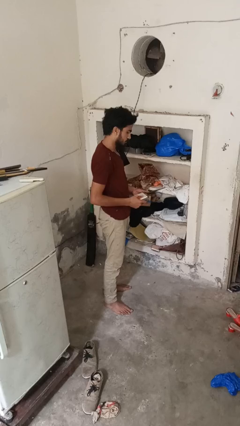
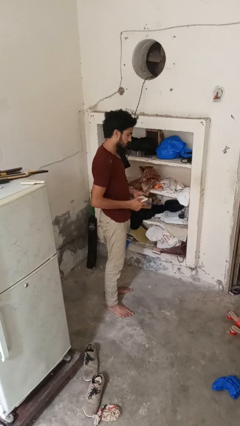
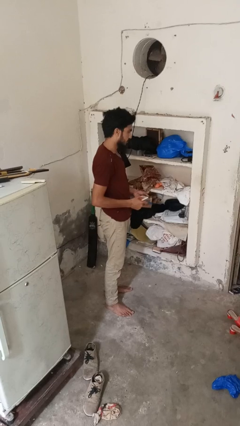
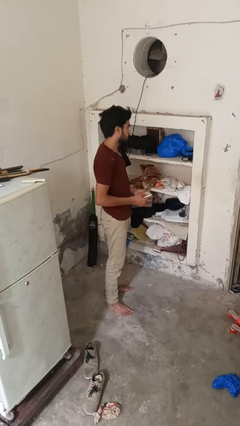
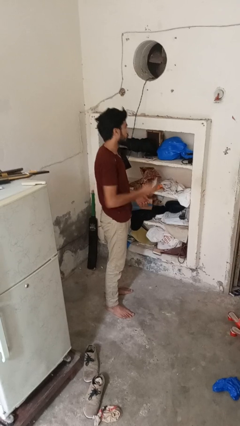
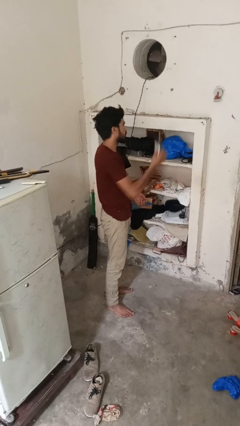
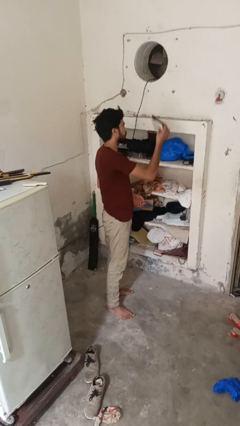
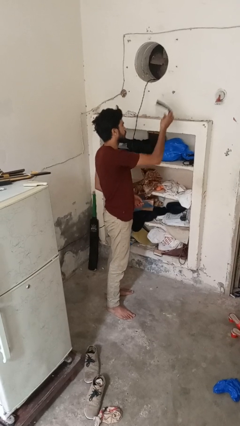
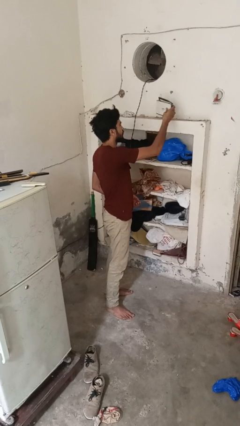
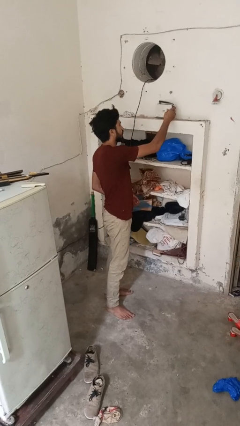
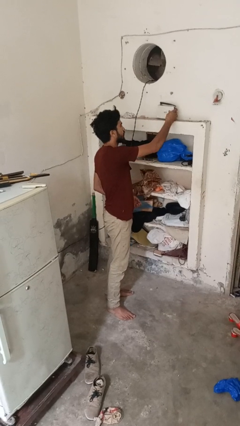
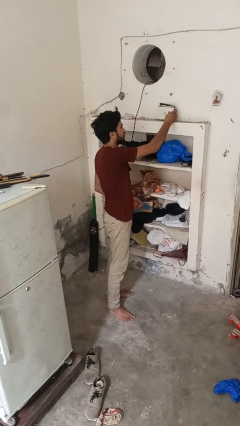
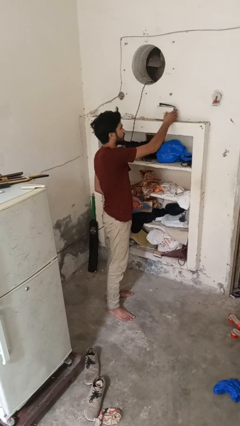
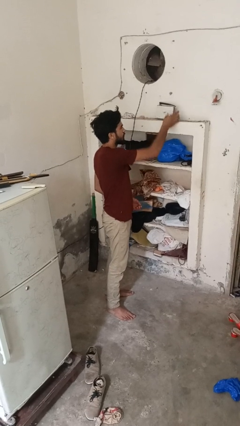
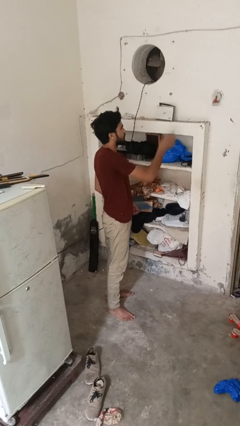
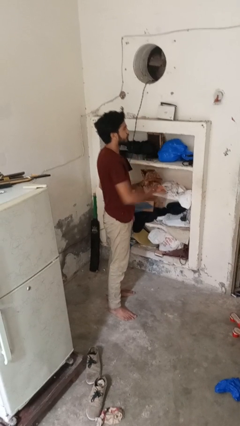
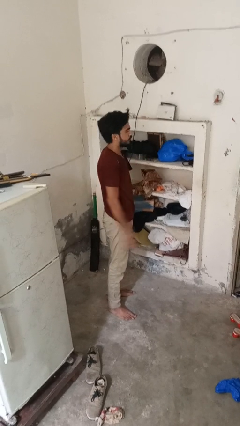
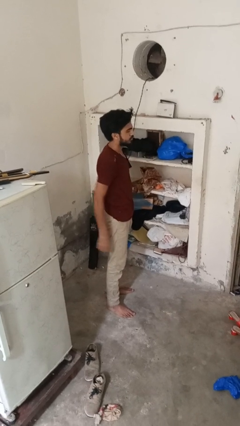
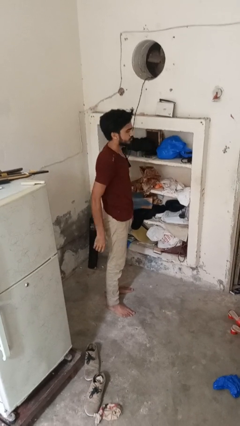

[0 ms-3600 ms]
person puts down object on shelf

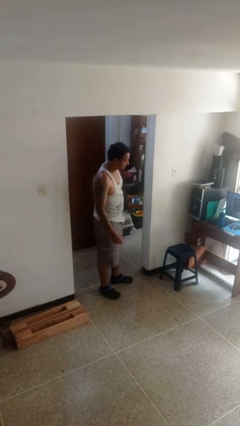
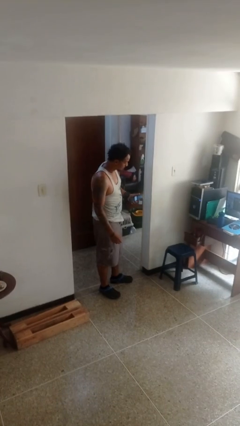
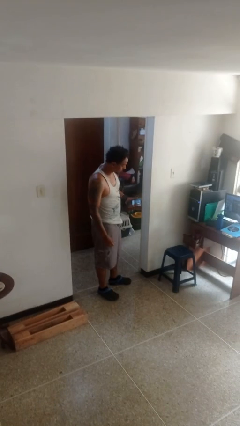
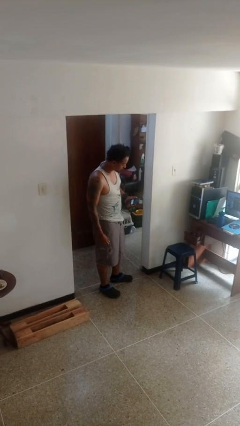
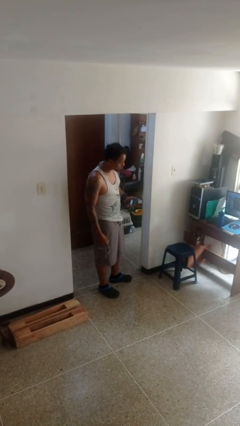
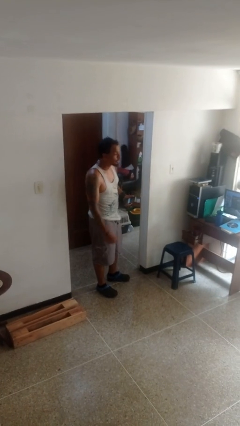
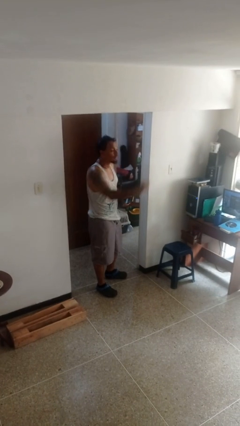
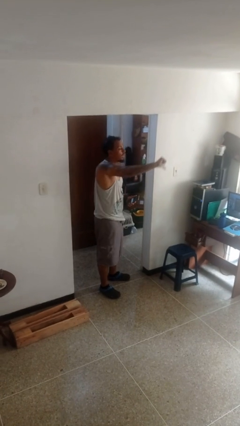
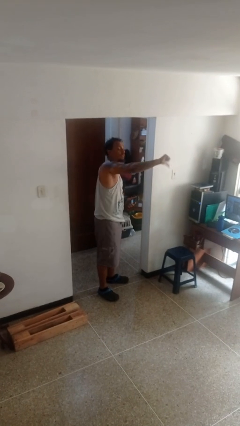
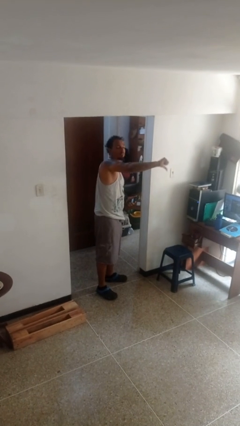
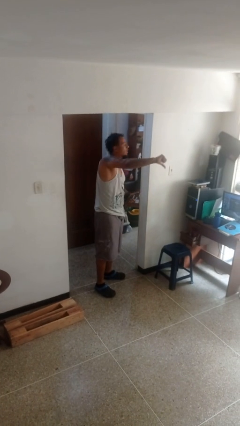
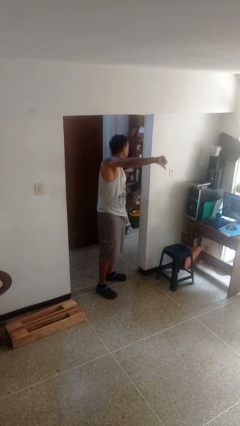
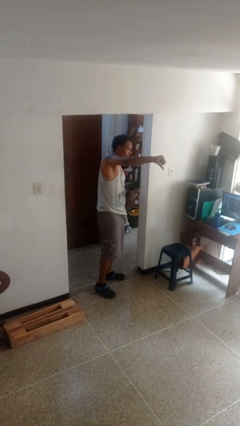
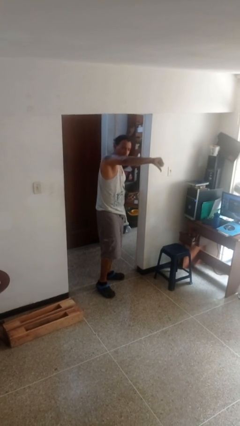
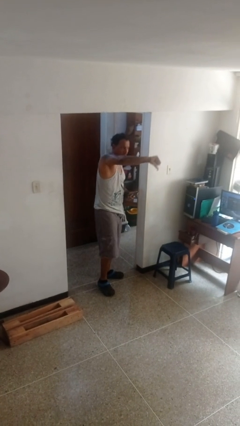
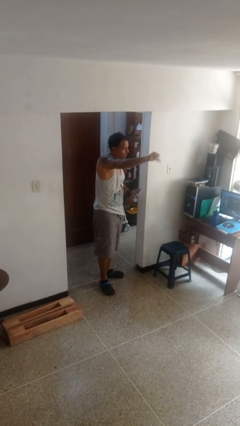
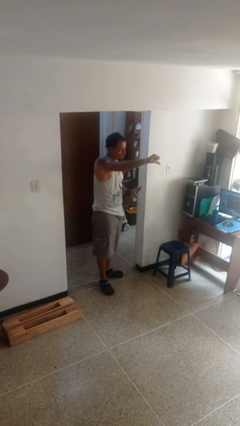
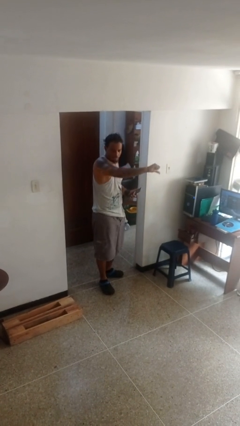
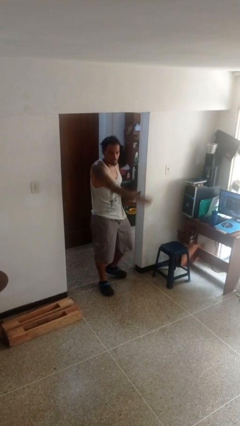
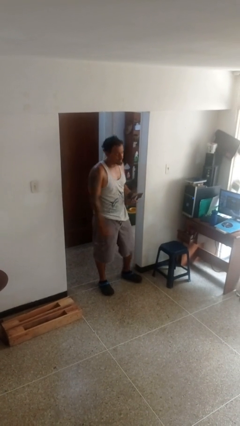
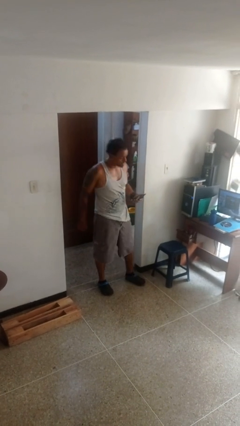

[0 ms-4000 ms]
person gestures thumbs down

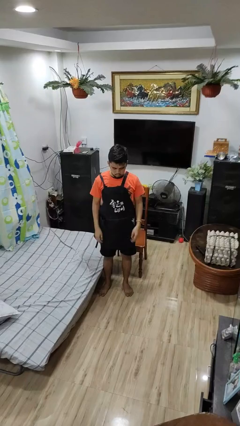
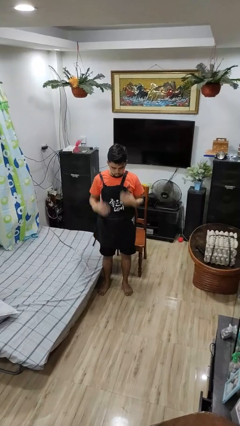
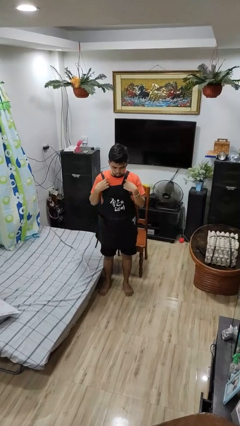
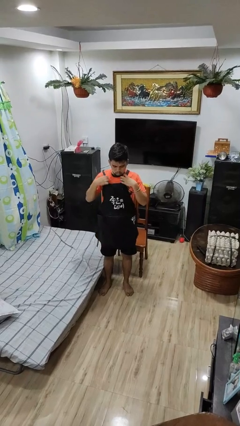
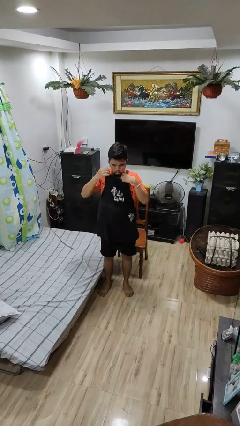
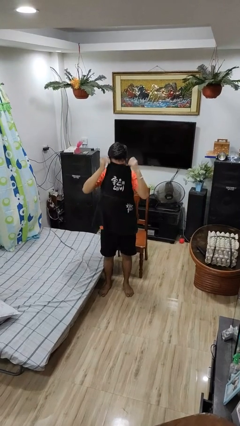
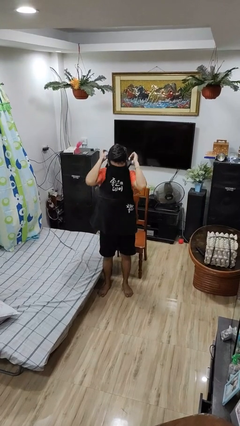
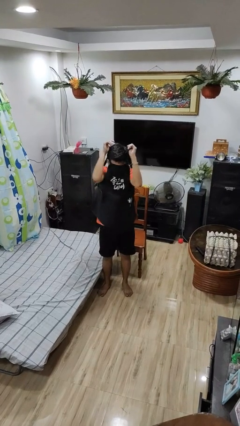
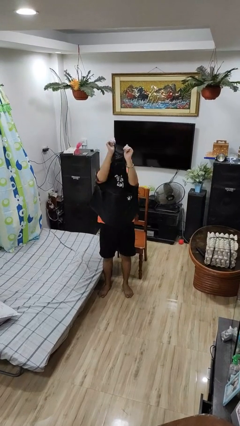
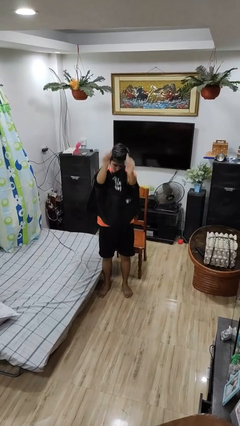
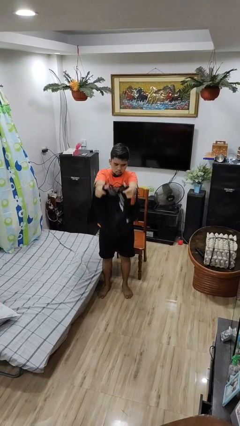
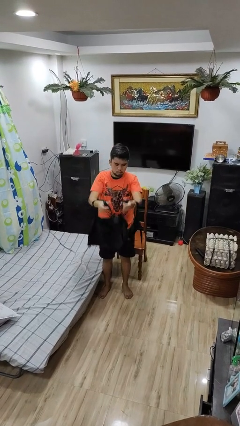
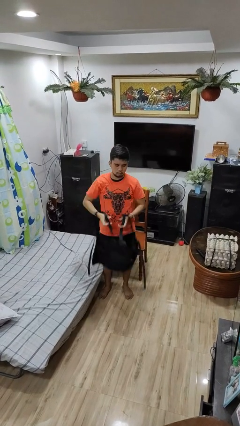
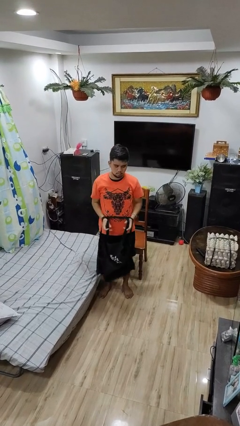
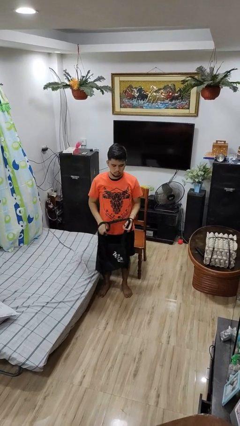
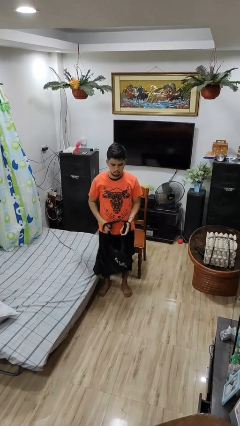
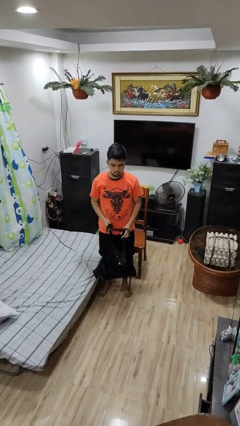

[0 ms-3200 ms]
person takes off apron

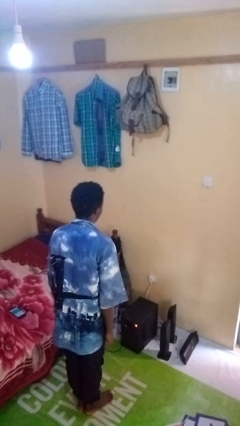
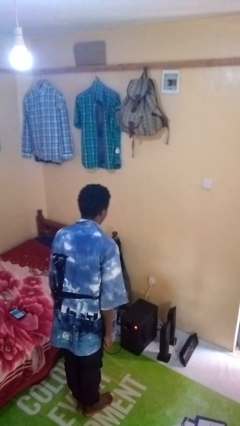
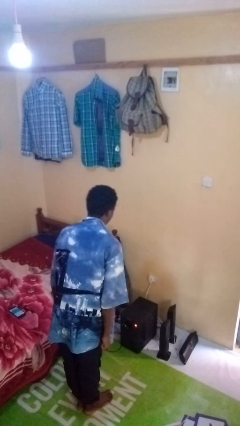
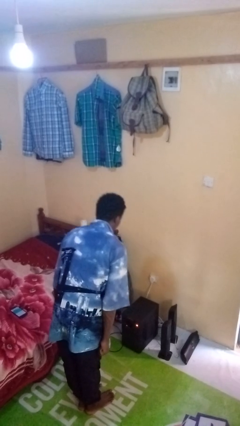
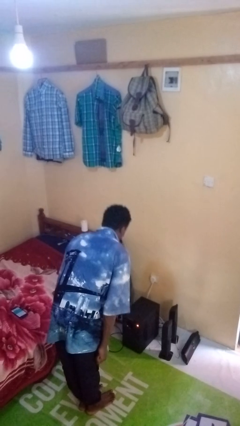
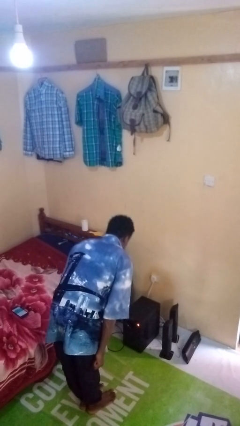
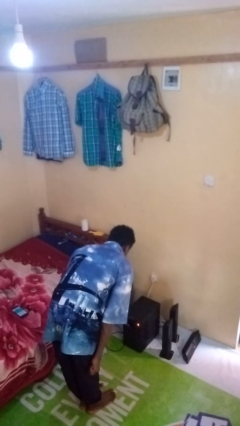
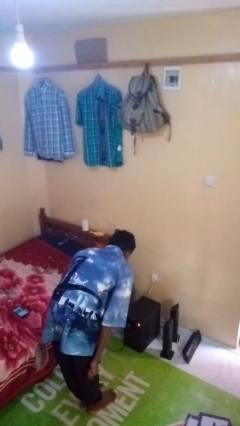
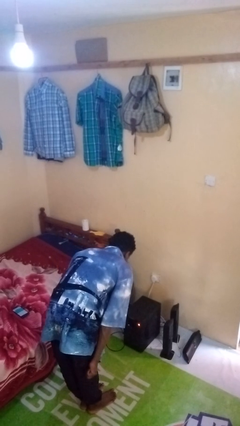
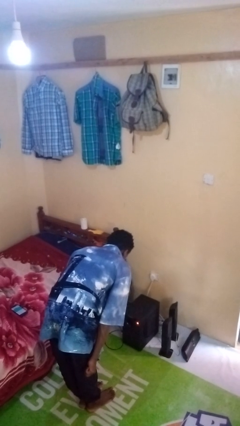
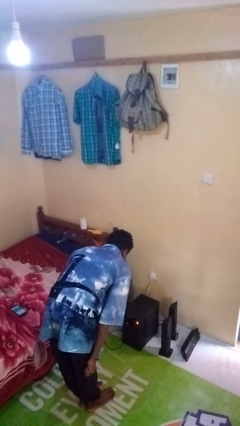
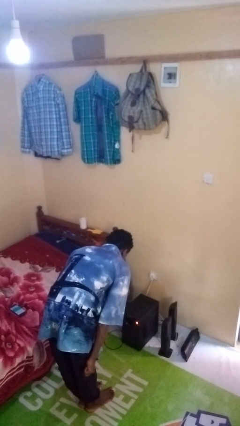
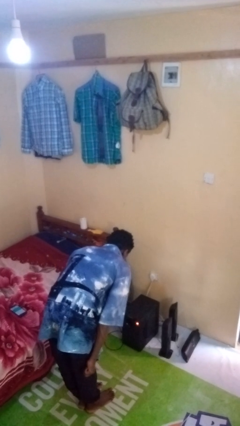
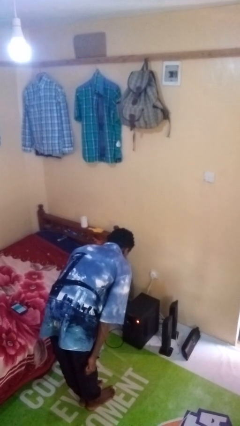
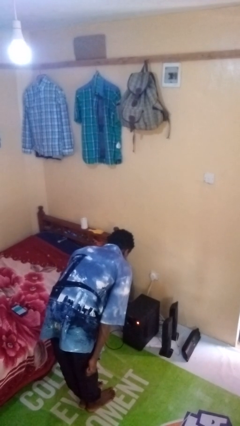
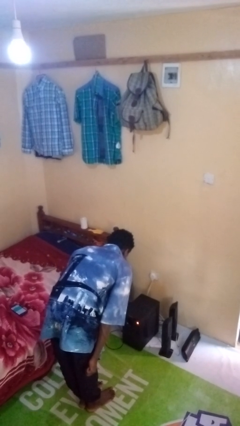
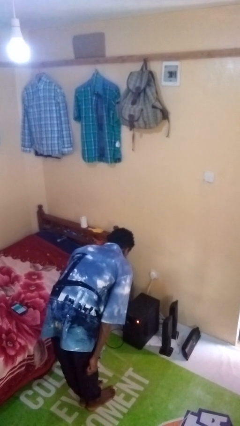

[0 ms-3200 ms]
person bows

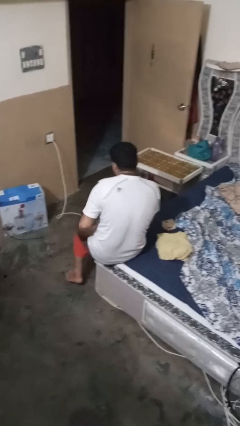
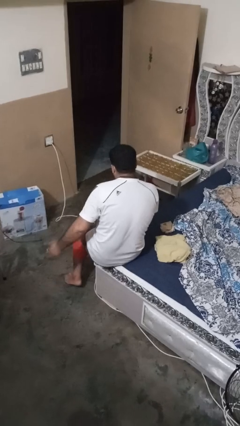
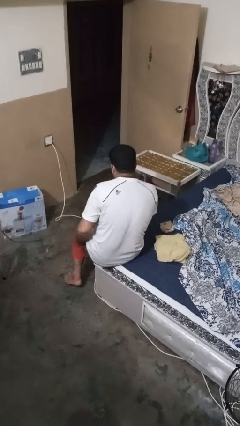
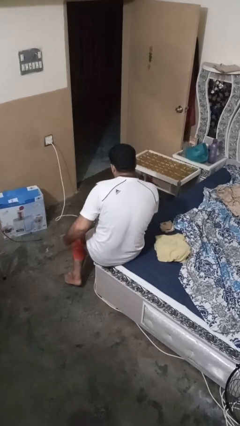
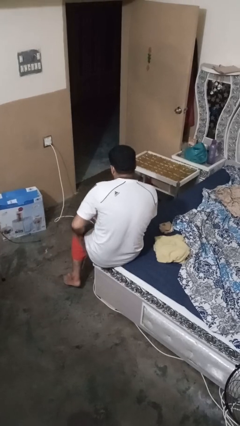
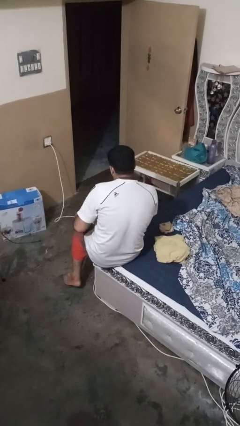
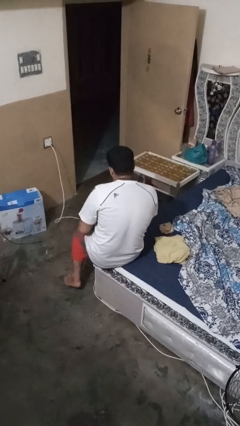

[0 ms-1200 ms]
person slaps hands on thighs

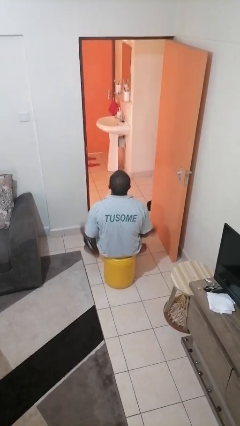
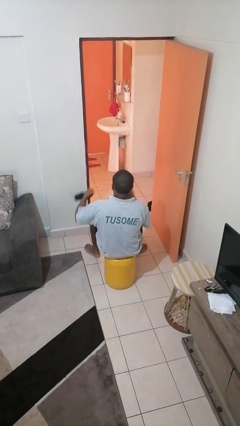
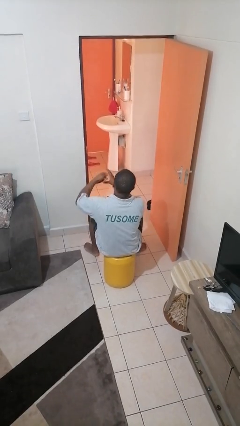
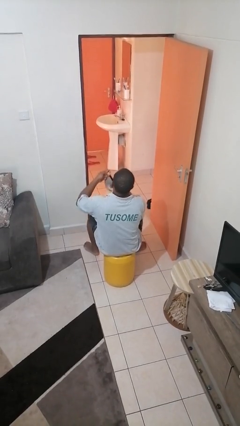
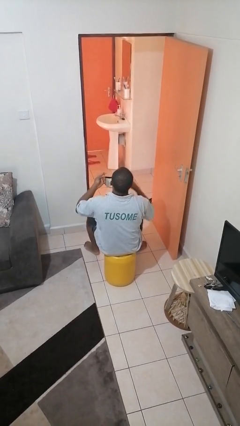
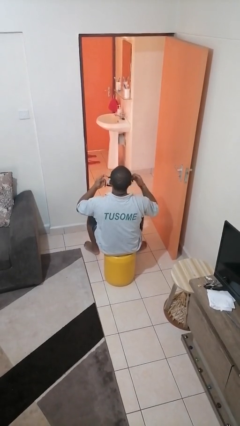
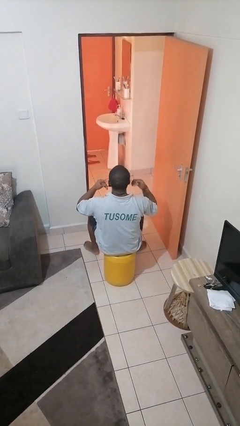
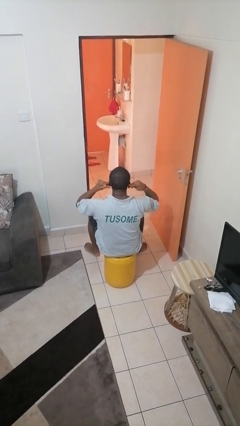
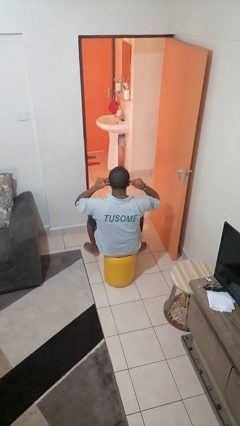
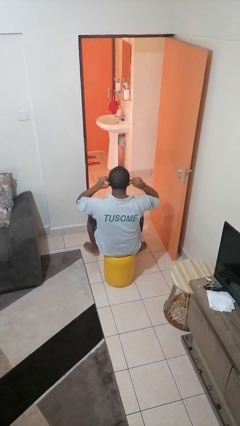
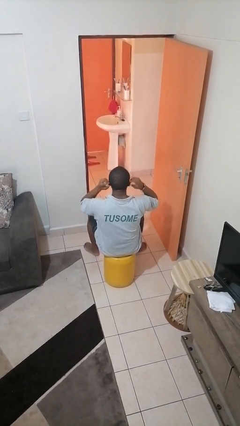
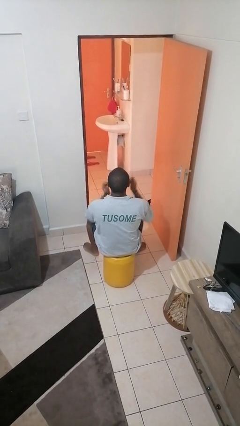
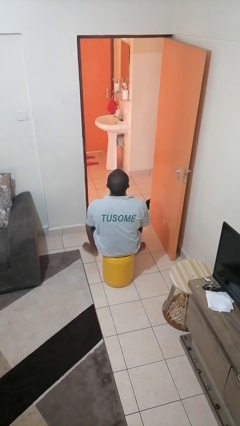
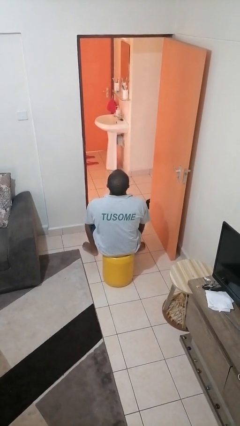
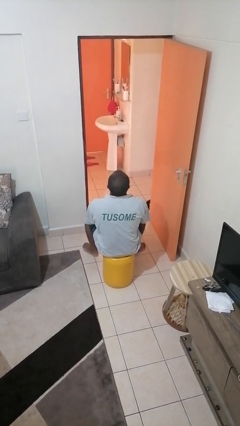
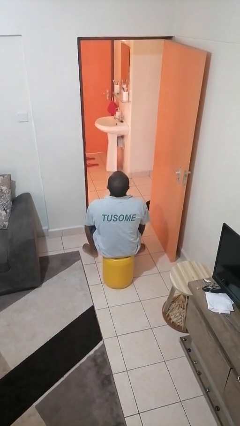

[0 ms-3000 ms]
person puts on facemask
